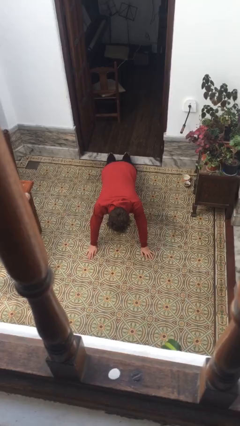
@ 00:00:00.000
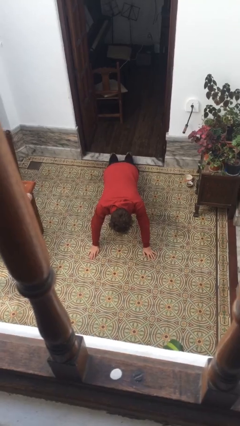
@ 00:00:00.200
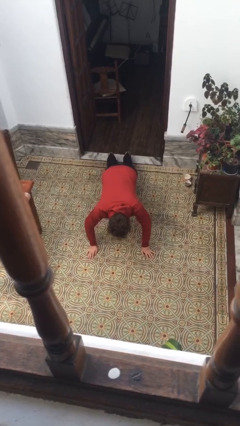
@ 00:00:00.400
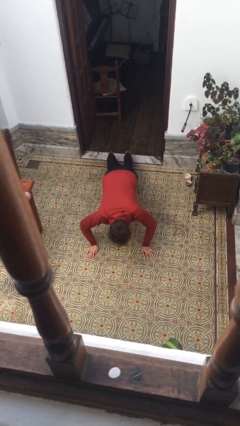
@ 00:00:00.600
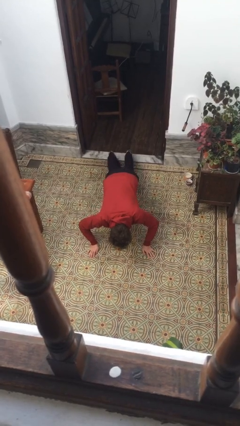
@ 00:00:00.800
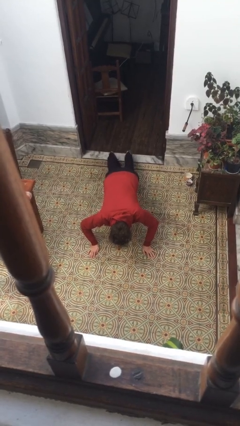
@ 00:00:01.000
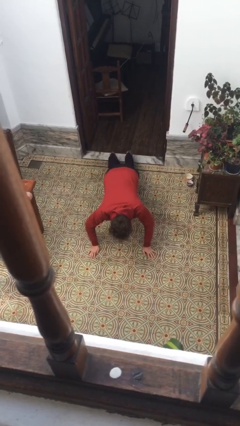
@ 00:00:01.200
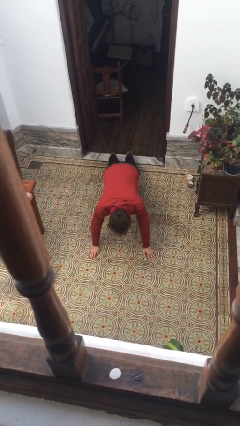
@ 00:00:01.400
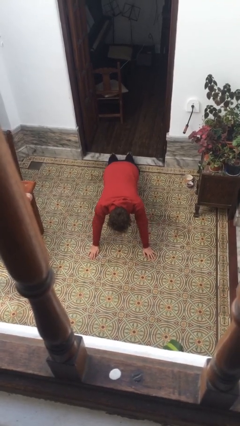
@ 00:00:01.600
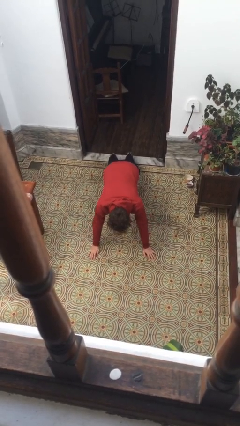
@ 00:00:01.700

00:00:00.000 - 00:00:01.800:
person exercises with pushup

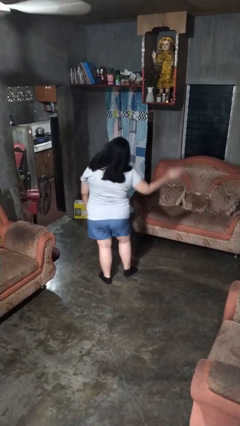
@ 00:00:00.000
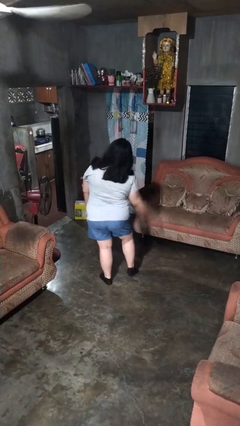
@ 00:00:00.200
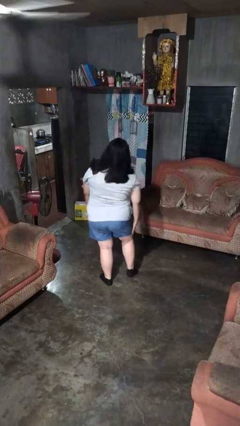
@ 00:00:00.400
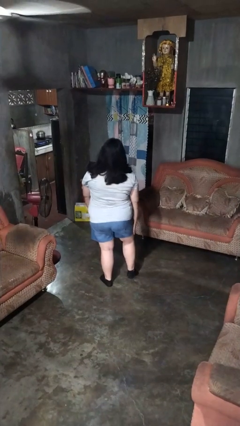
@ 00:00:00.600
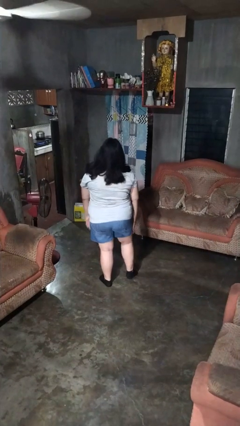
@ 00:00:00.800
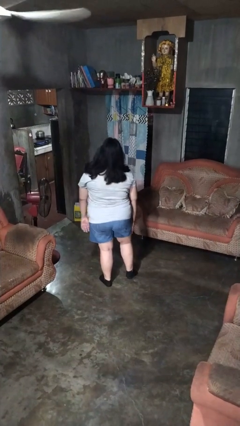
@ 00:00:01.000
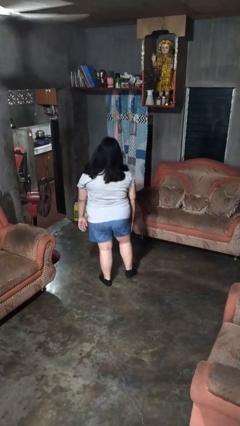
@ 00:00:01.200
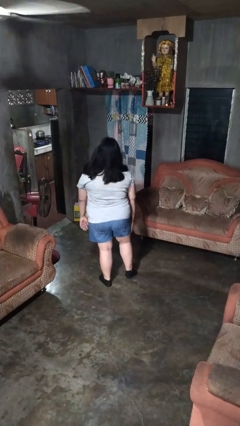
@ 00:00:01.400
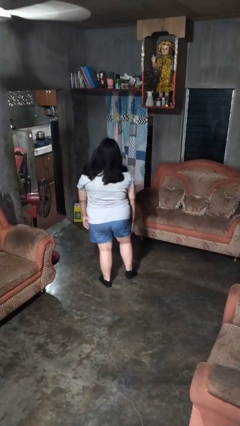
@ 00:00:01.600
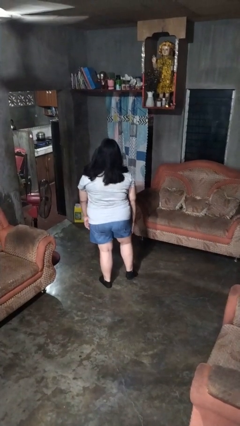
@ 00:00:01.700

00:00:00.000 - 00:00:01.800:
person swats bug

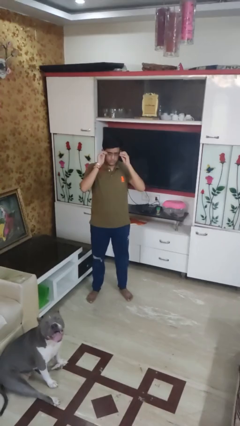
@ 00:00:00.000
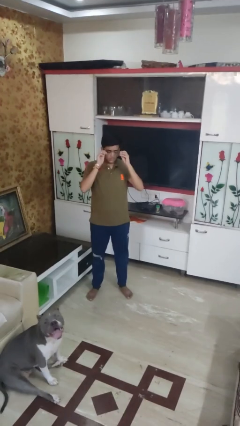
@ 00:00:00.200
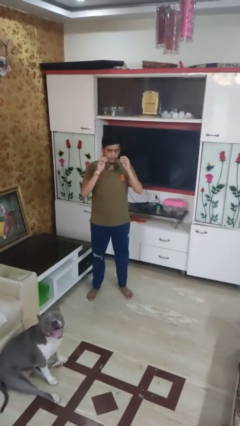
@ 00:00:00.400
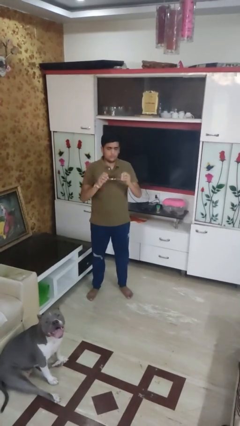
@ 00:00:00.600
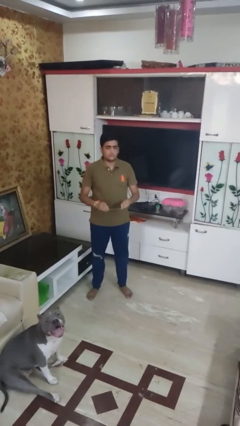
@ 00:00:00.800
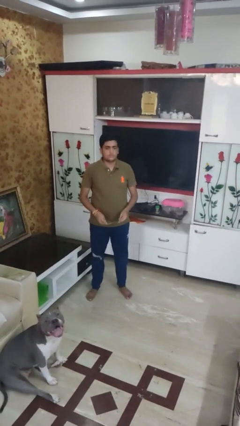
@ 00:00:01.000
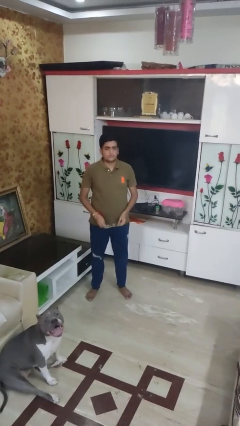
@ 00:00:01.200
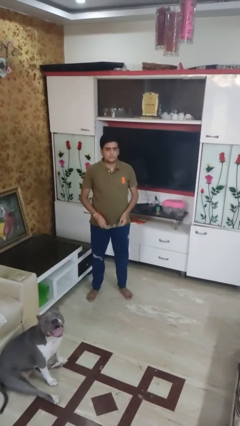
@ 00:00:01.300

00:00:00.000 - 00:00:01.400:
person takes off glasses

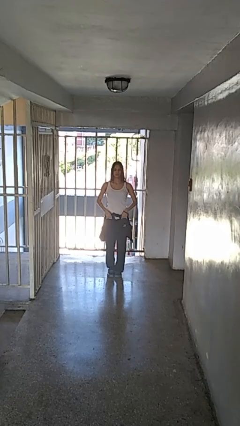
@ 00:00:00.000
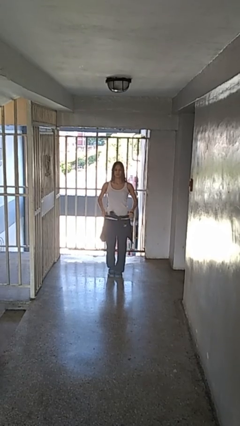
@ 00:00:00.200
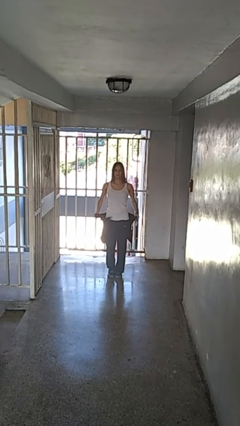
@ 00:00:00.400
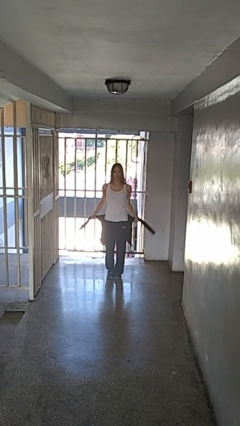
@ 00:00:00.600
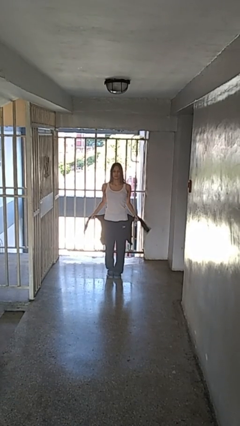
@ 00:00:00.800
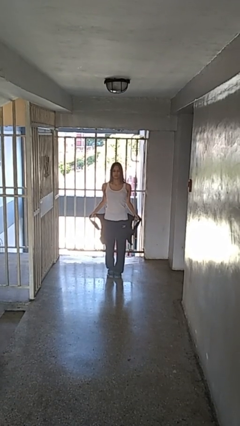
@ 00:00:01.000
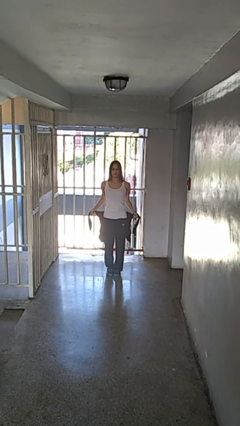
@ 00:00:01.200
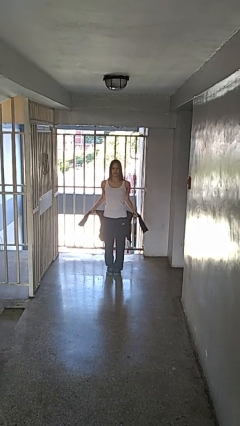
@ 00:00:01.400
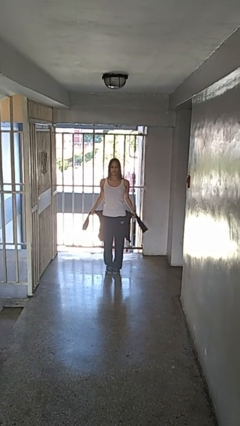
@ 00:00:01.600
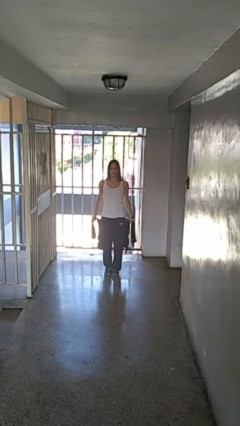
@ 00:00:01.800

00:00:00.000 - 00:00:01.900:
person unties jacket around waist

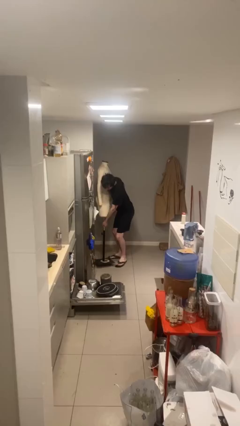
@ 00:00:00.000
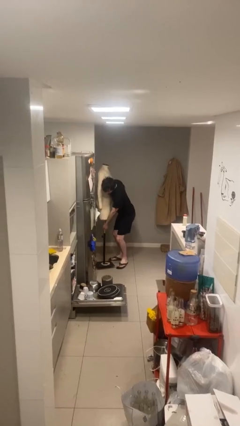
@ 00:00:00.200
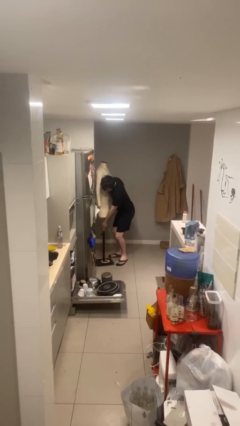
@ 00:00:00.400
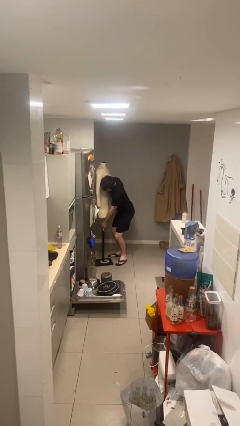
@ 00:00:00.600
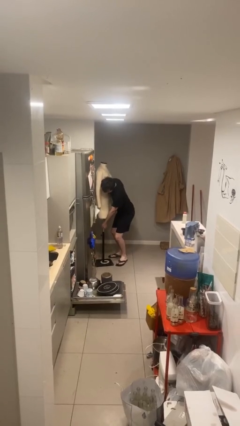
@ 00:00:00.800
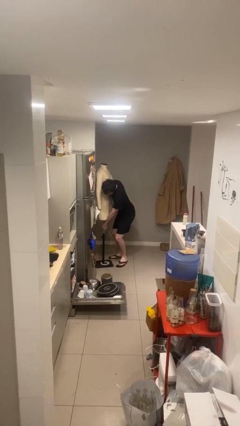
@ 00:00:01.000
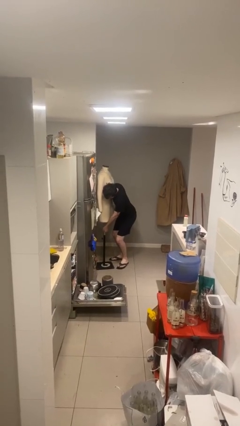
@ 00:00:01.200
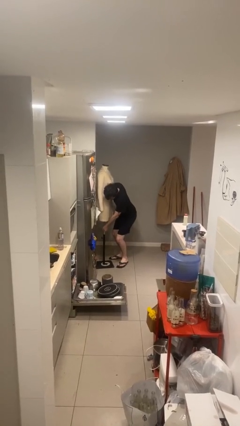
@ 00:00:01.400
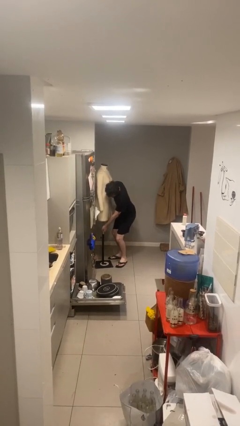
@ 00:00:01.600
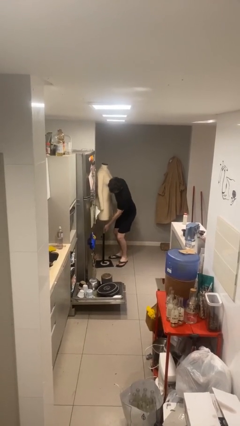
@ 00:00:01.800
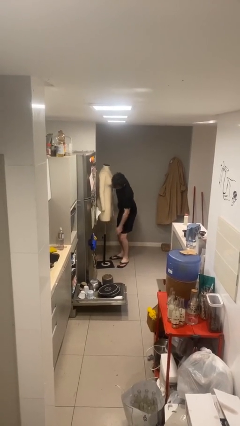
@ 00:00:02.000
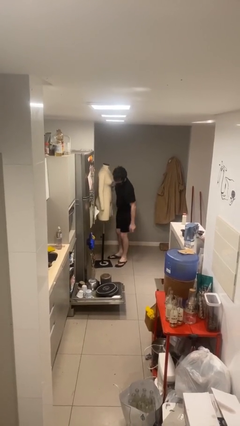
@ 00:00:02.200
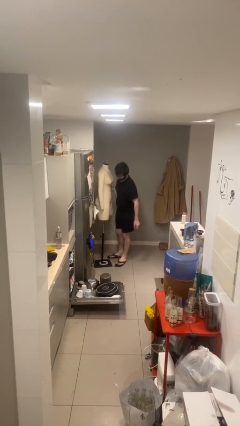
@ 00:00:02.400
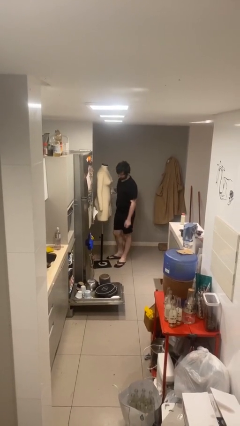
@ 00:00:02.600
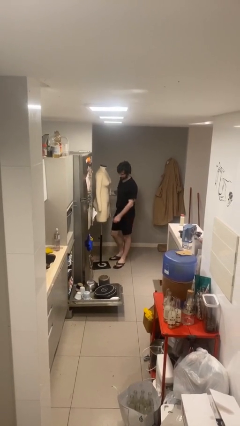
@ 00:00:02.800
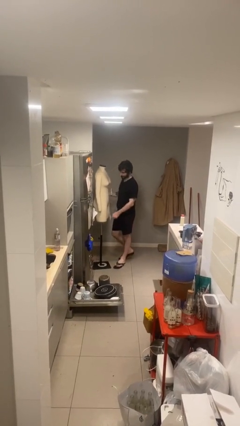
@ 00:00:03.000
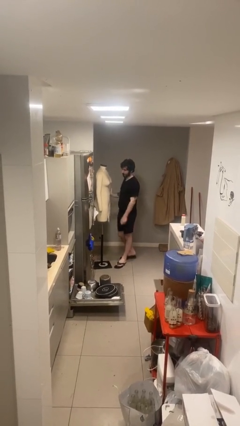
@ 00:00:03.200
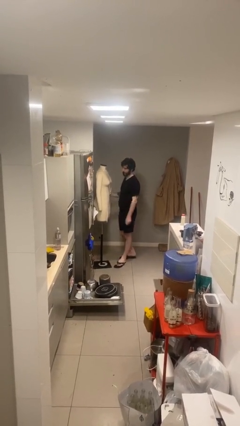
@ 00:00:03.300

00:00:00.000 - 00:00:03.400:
person puts down object on floor

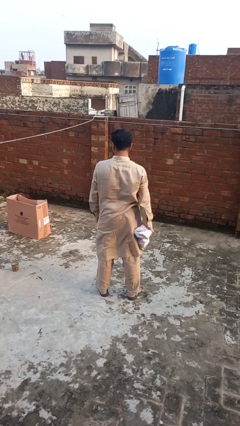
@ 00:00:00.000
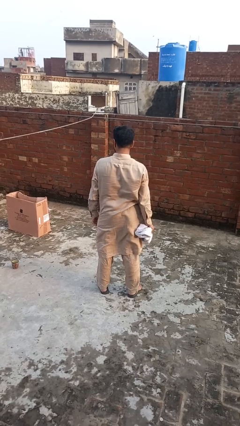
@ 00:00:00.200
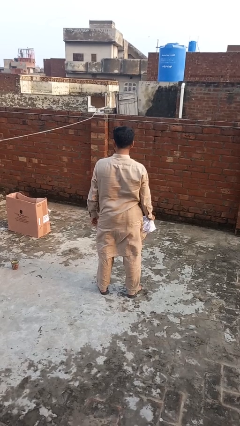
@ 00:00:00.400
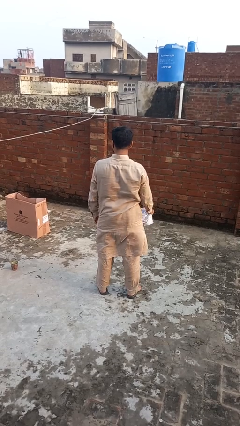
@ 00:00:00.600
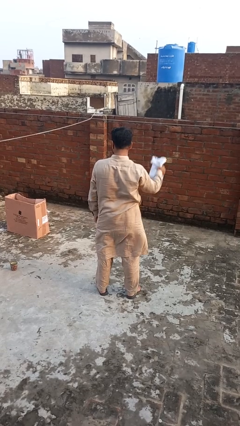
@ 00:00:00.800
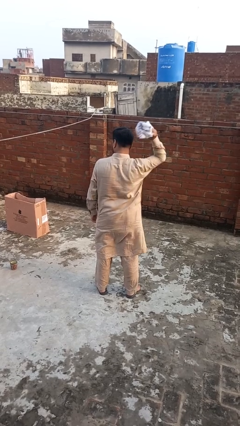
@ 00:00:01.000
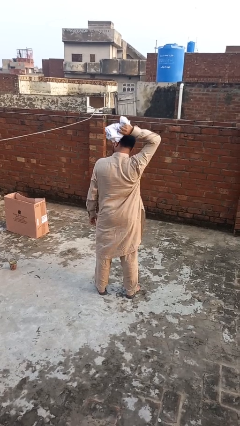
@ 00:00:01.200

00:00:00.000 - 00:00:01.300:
person dries hair with towel

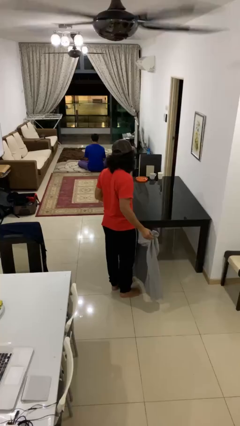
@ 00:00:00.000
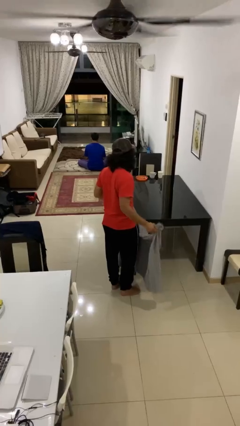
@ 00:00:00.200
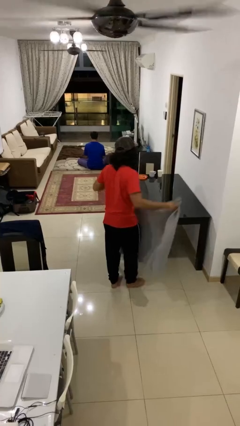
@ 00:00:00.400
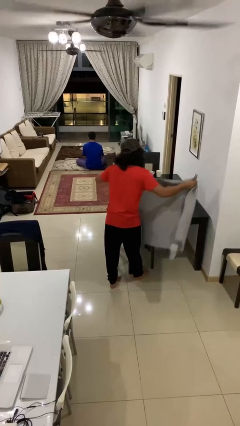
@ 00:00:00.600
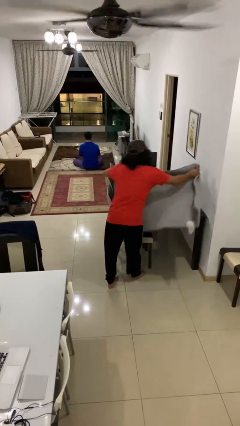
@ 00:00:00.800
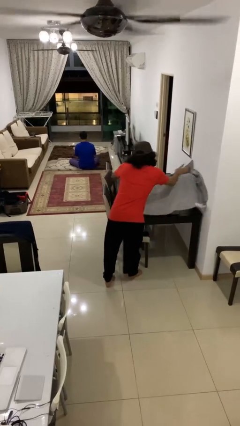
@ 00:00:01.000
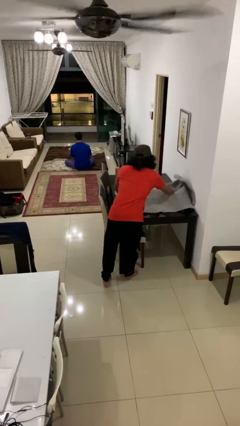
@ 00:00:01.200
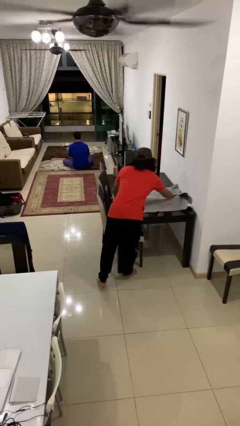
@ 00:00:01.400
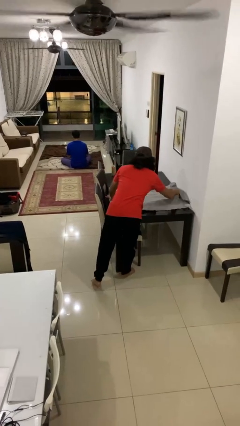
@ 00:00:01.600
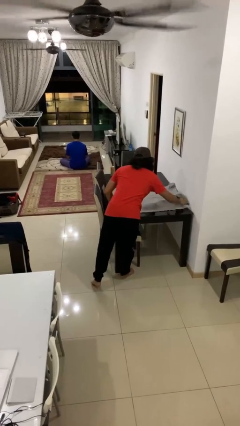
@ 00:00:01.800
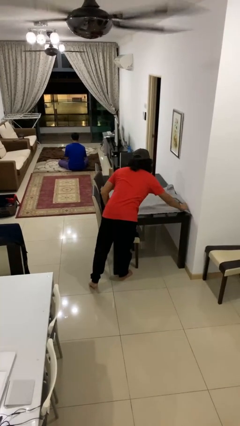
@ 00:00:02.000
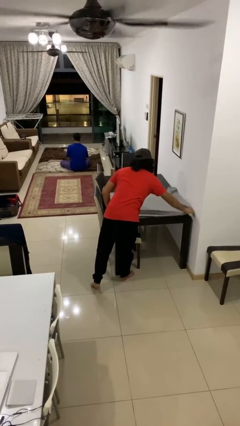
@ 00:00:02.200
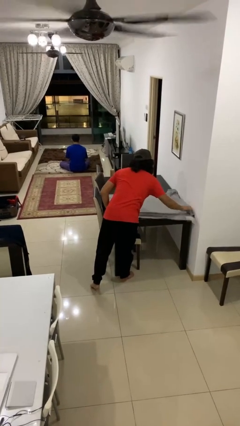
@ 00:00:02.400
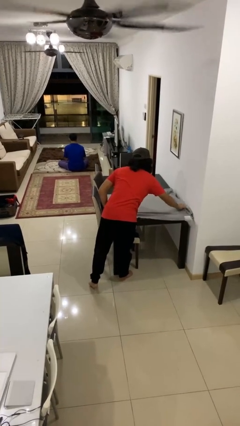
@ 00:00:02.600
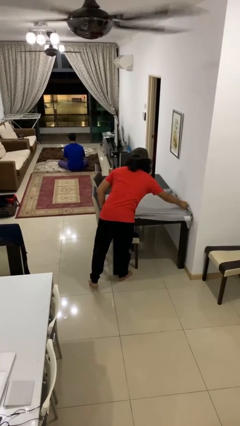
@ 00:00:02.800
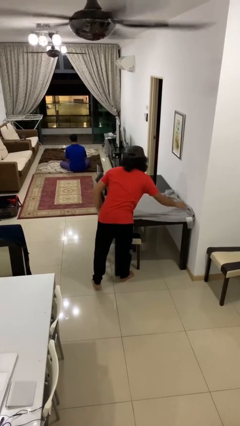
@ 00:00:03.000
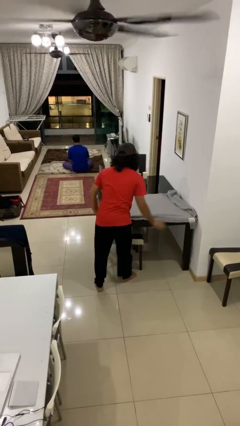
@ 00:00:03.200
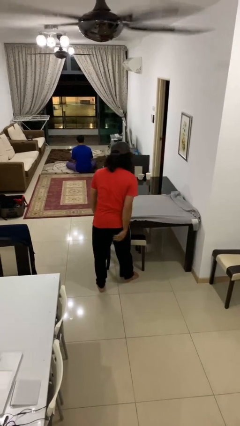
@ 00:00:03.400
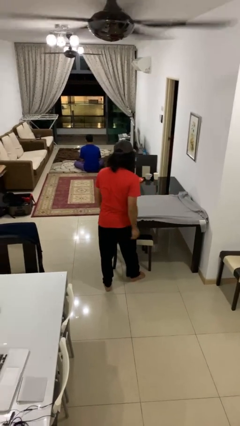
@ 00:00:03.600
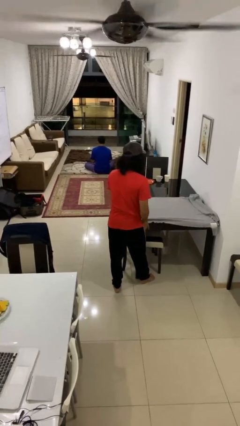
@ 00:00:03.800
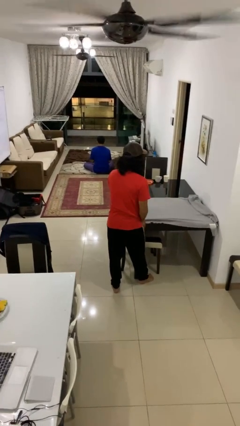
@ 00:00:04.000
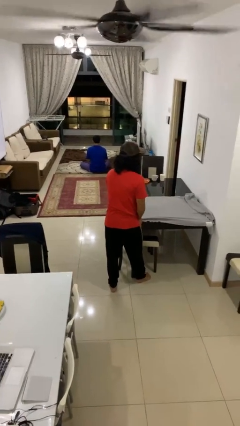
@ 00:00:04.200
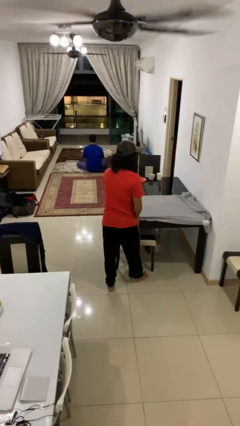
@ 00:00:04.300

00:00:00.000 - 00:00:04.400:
person spreads tablecloth

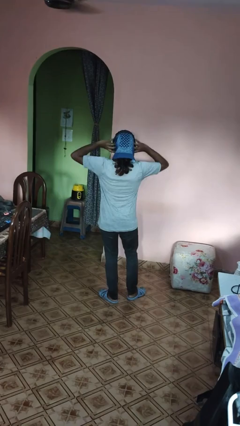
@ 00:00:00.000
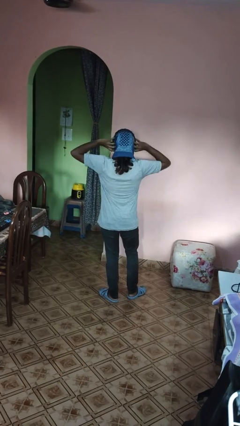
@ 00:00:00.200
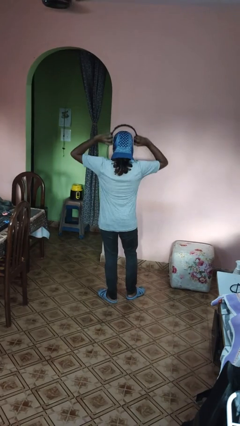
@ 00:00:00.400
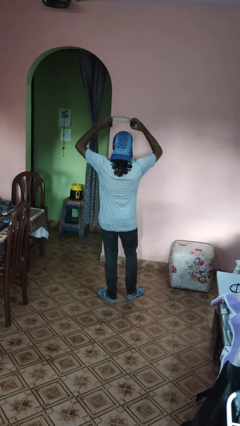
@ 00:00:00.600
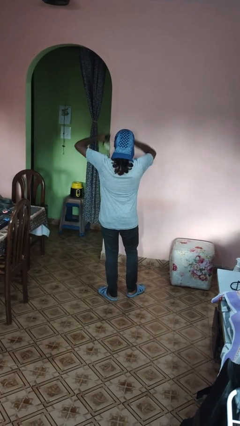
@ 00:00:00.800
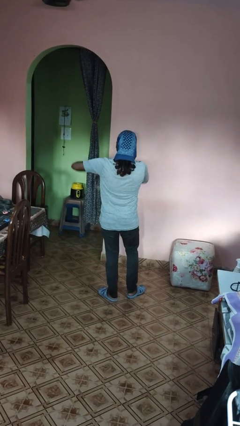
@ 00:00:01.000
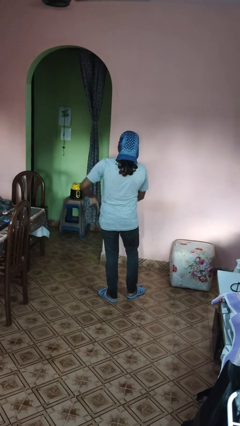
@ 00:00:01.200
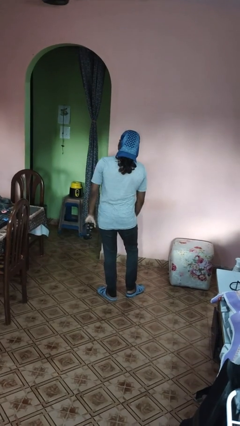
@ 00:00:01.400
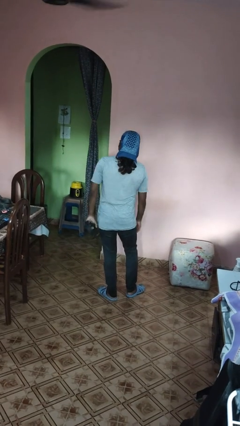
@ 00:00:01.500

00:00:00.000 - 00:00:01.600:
person takes off headphones
